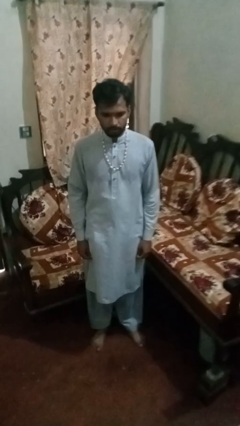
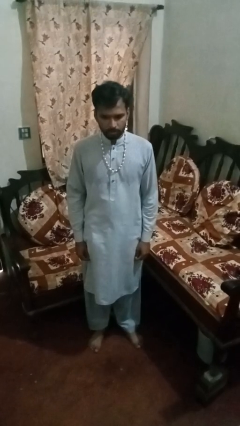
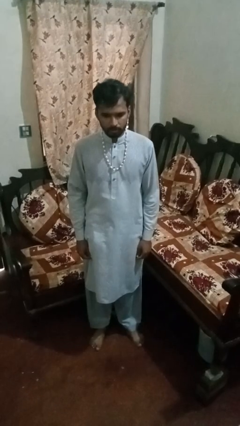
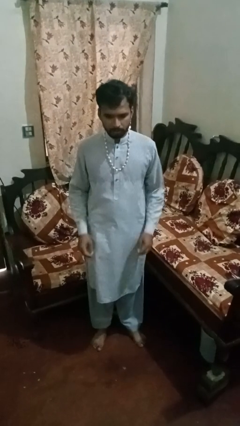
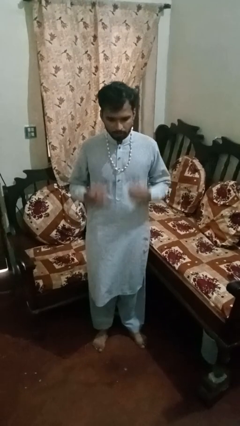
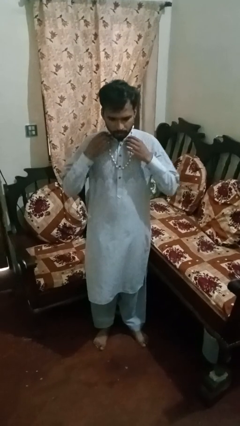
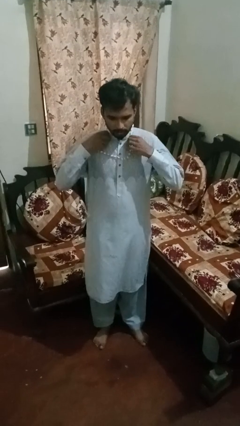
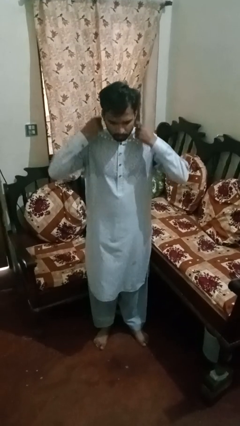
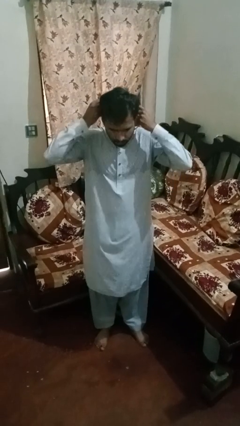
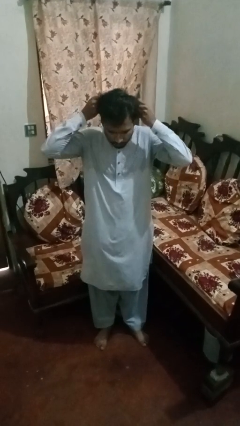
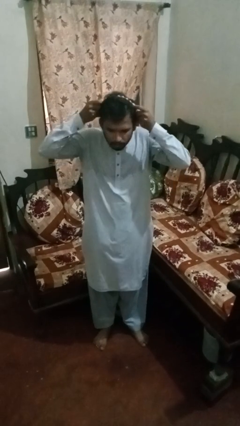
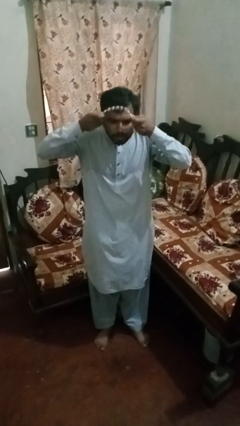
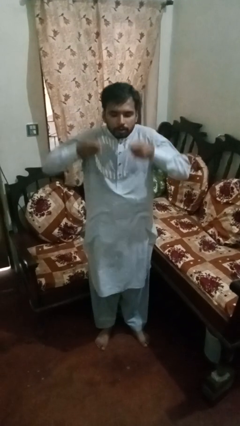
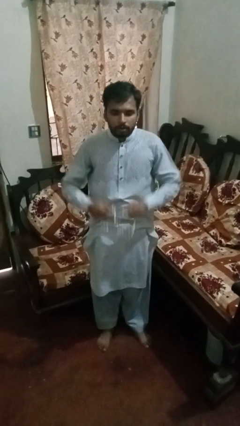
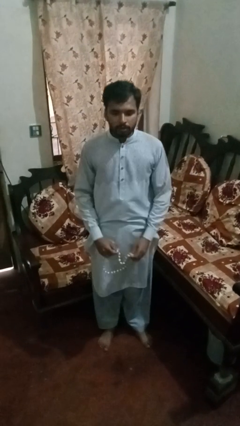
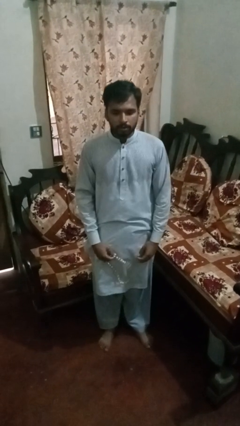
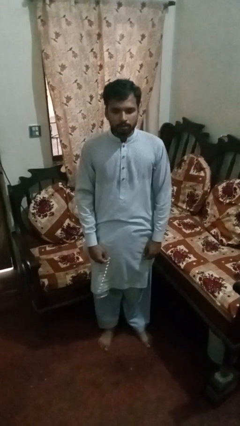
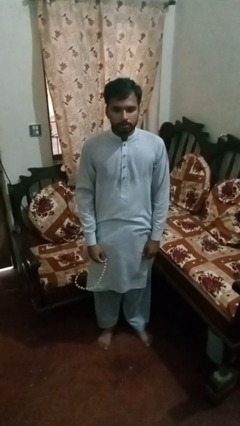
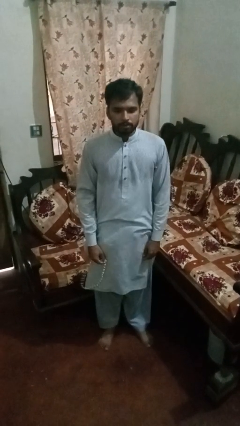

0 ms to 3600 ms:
person takes off necklace

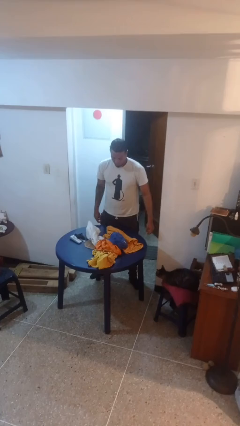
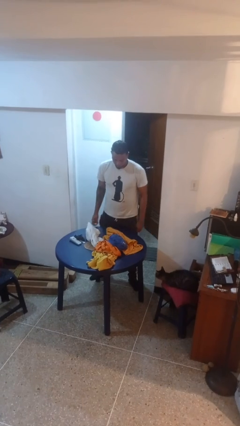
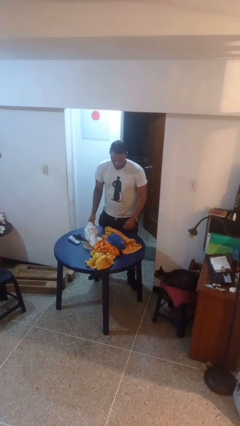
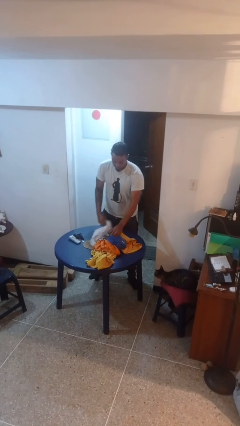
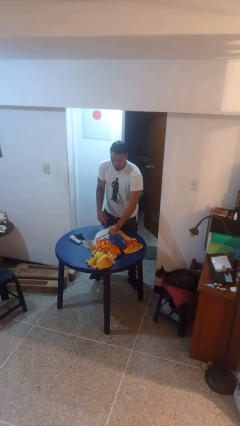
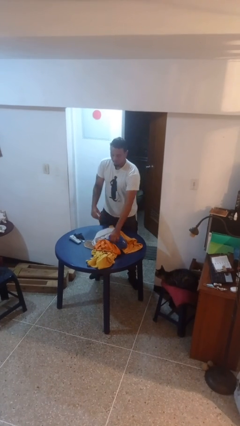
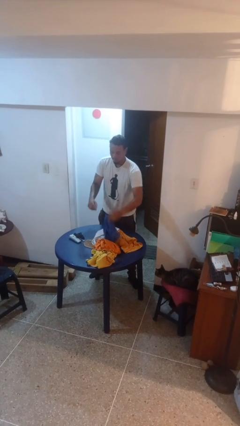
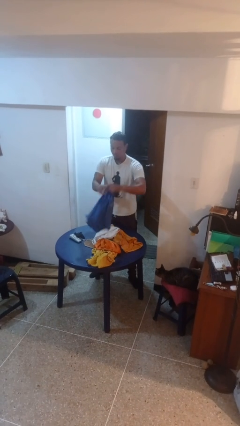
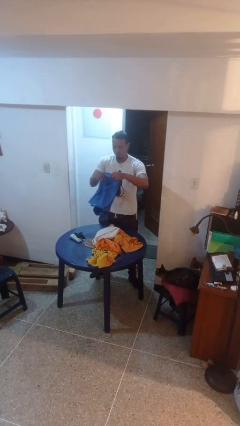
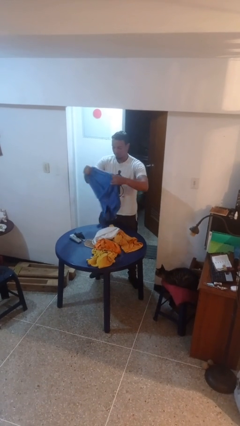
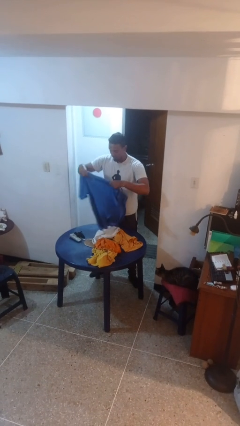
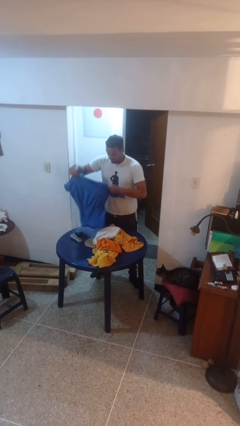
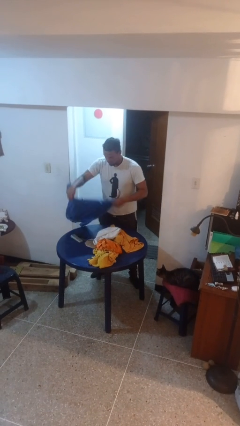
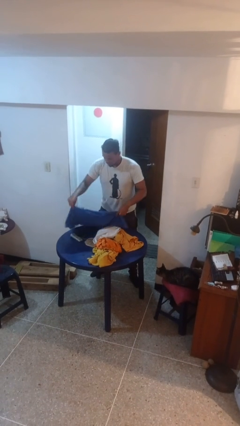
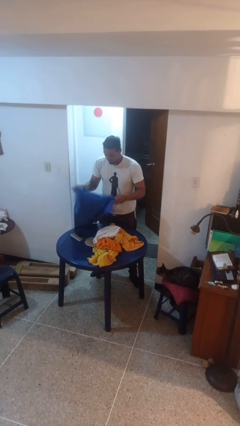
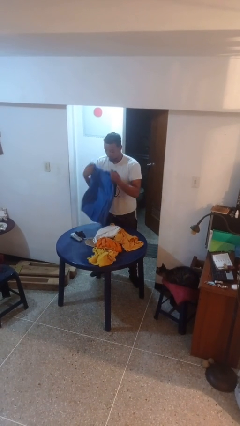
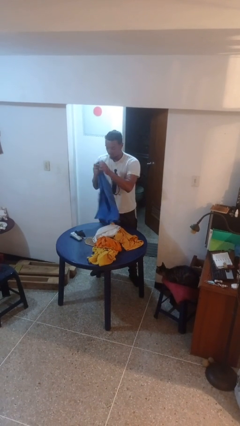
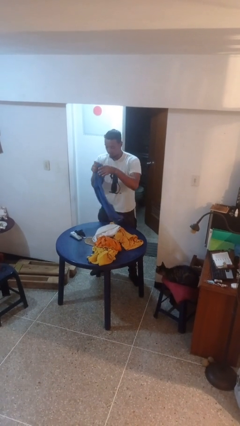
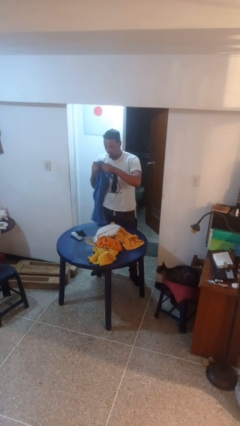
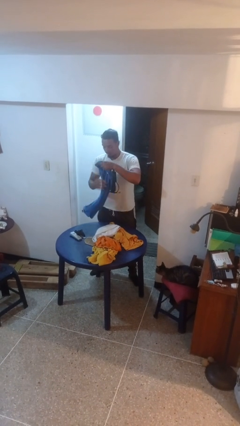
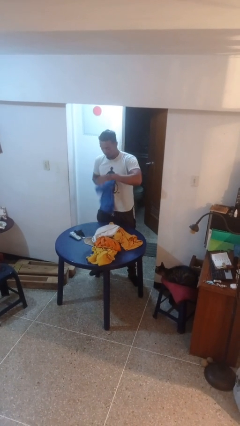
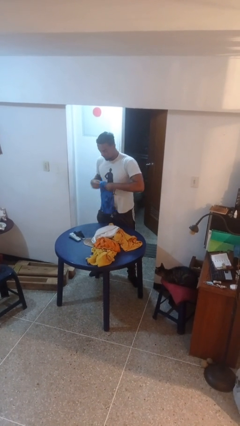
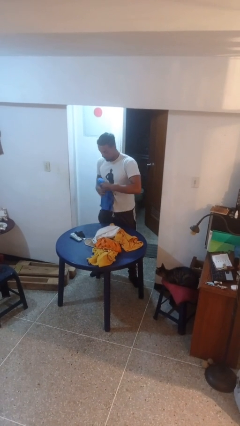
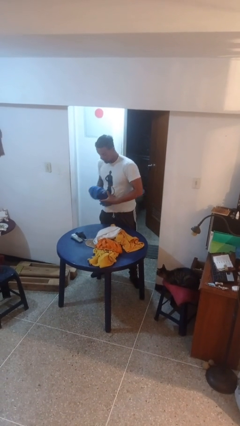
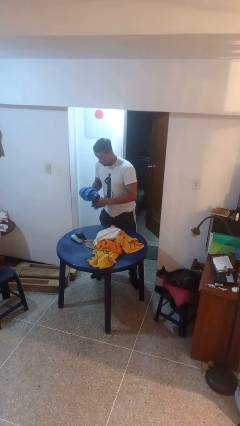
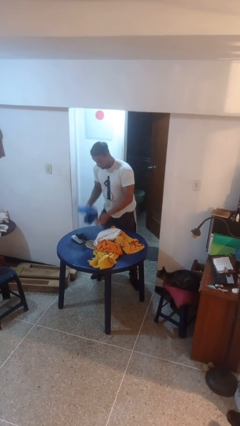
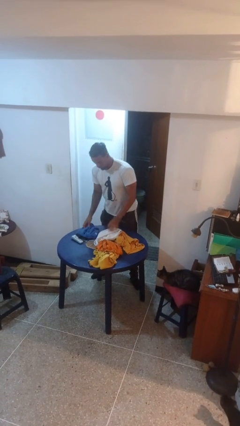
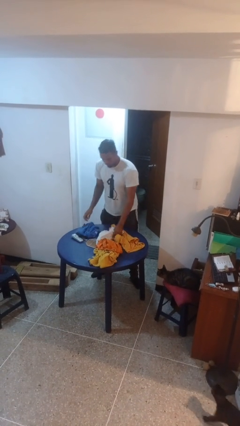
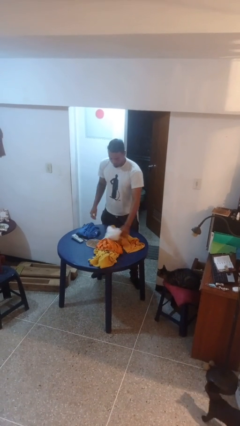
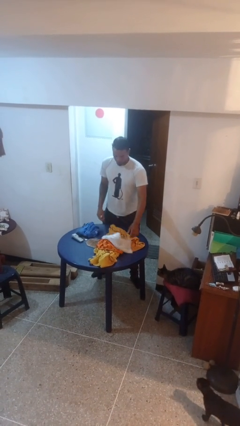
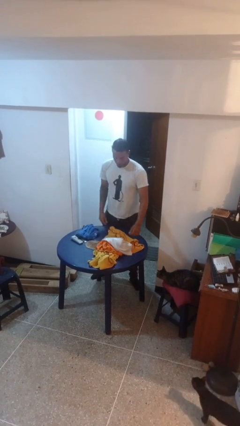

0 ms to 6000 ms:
person folds shirt

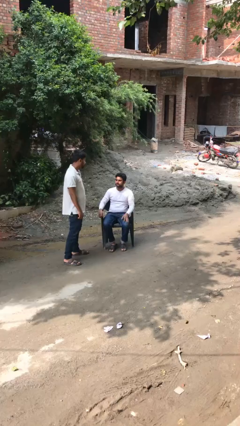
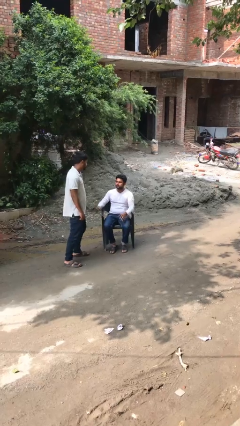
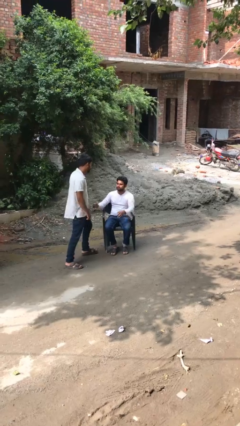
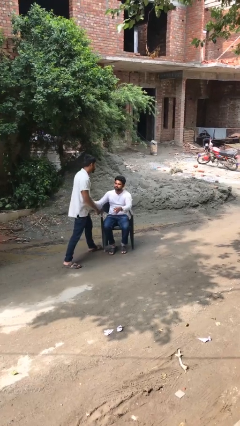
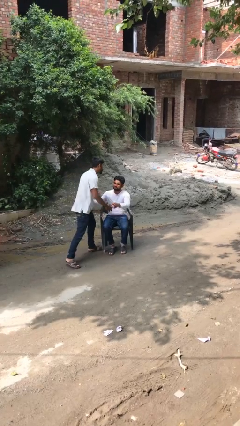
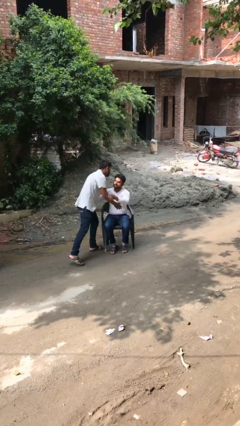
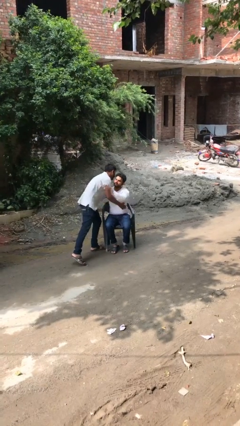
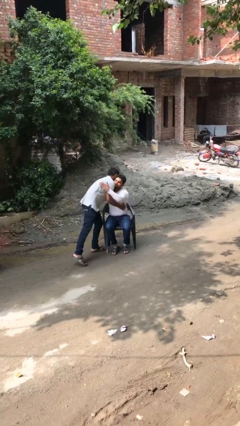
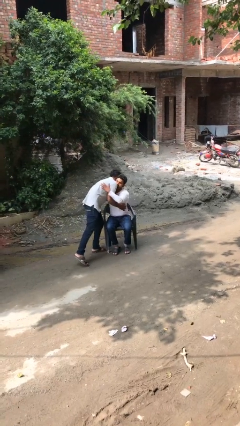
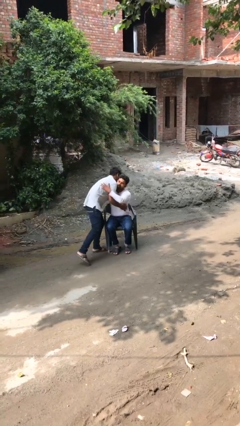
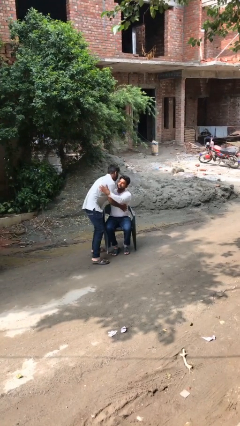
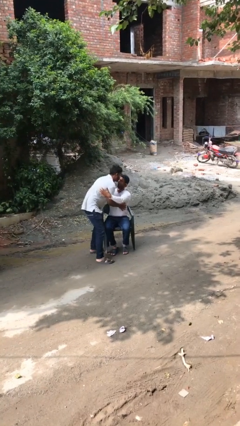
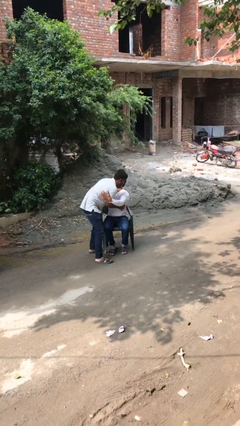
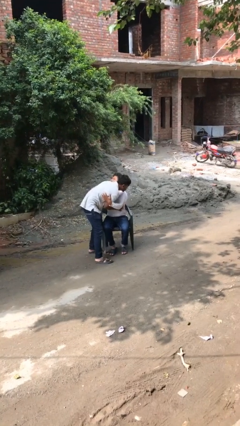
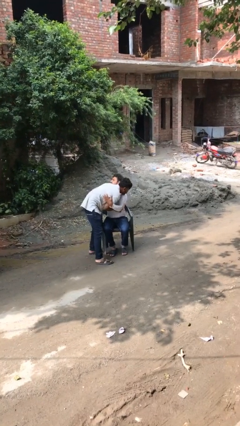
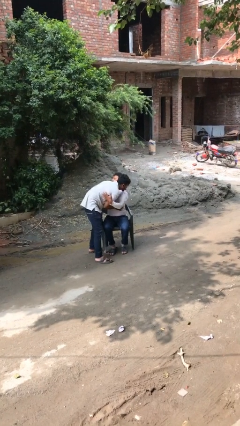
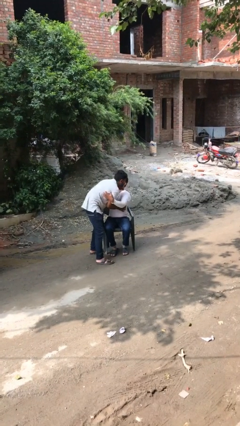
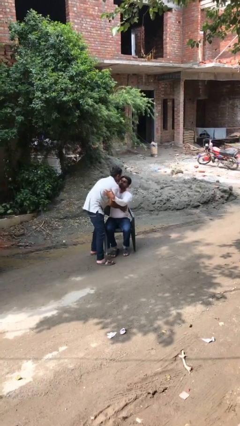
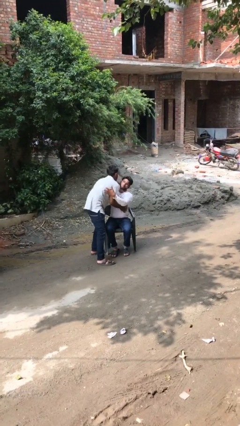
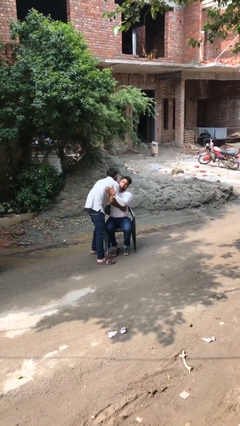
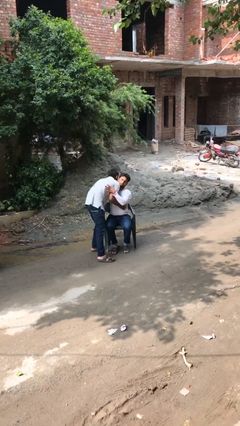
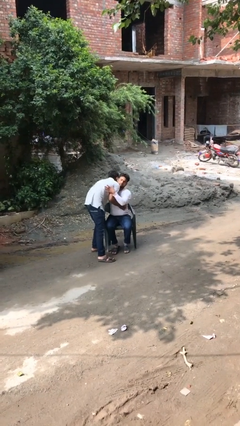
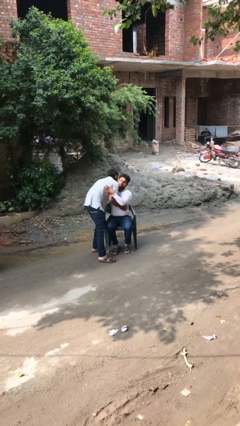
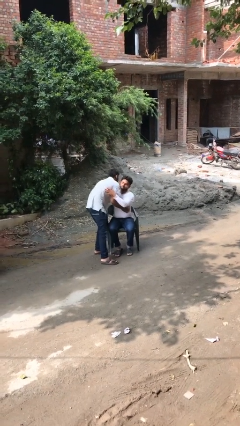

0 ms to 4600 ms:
person embraces person

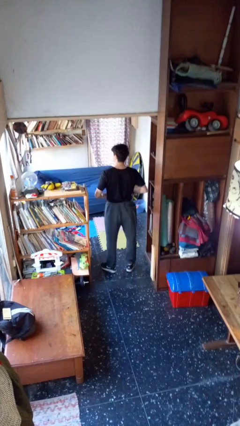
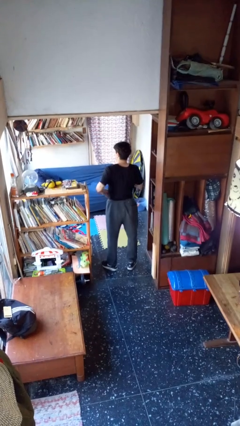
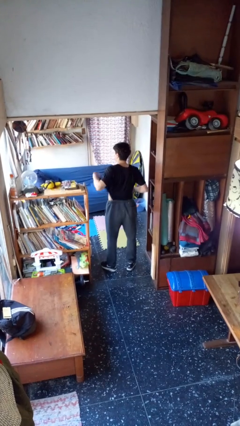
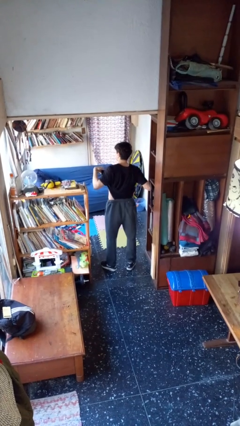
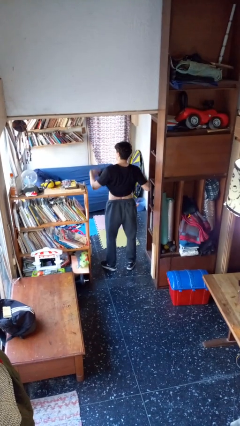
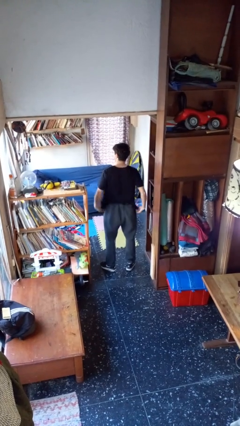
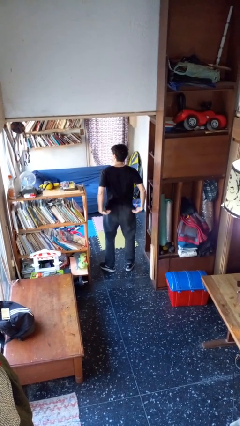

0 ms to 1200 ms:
person untucks shirt

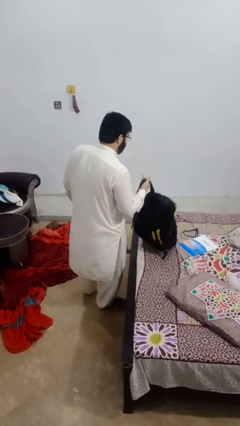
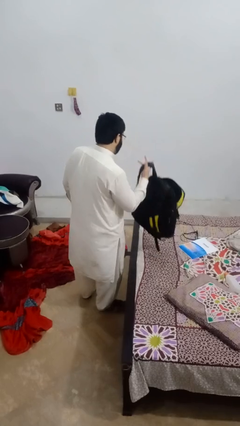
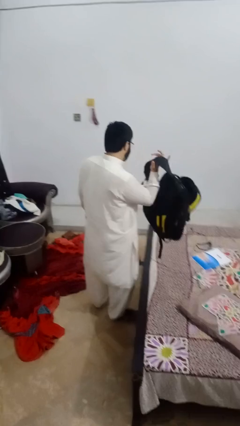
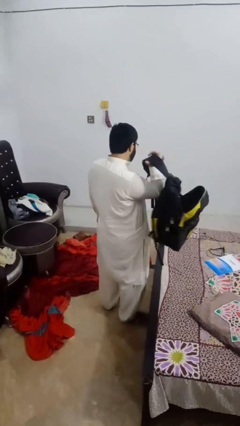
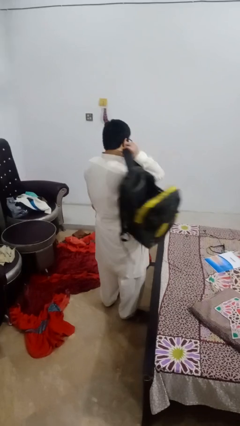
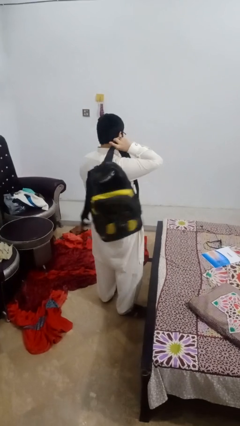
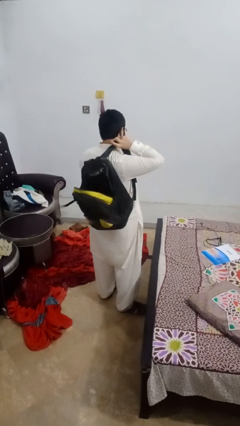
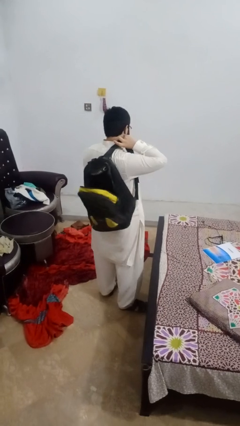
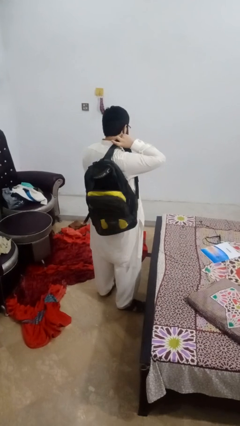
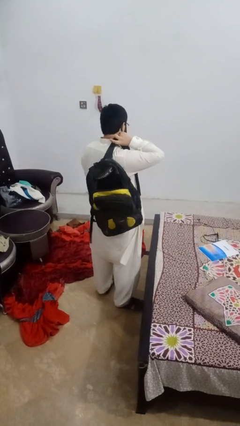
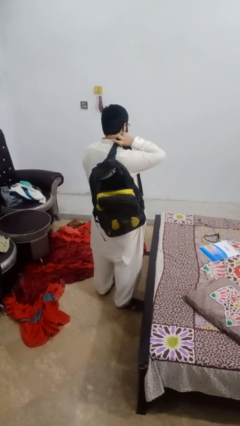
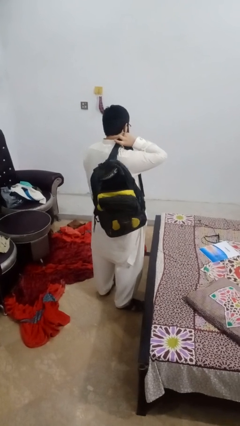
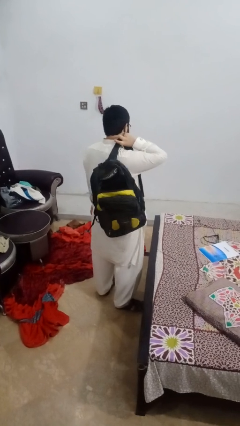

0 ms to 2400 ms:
person puts object into backpack
